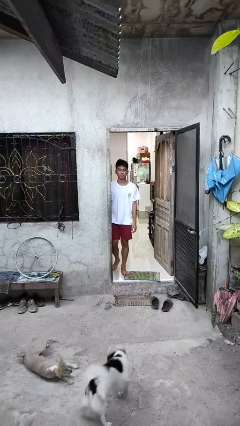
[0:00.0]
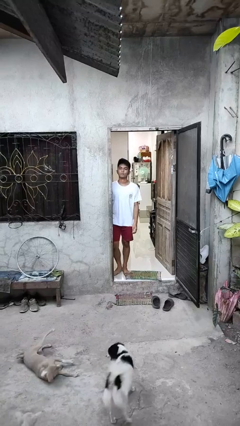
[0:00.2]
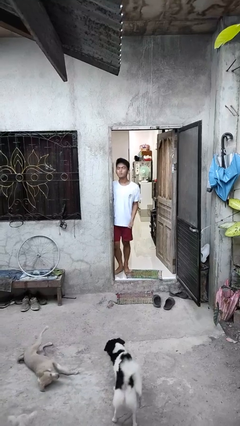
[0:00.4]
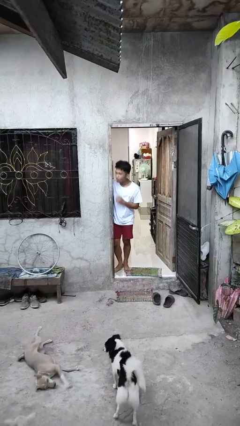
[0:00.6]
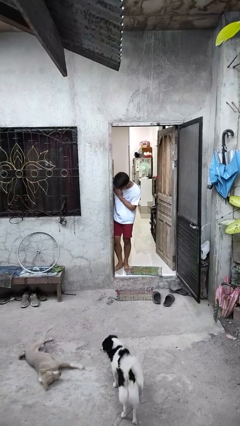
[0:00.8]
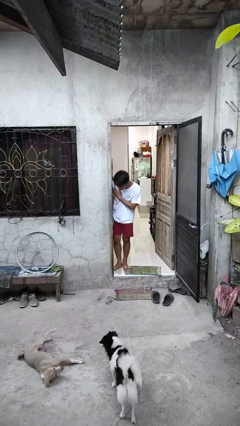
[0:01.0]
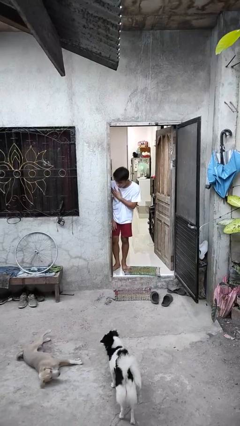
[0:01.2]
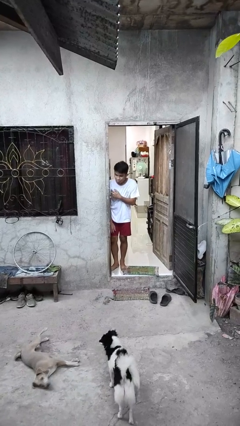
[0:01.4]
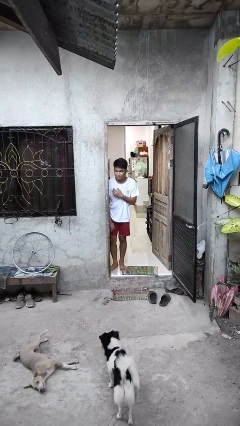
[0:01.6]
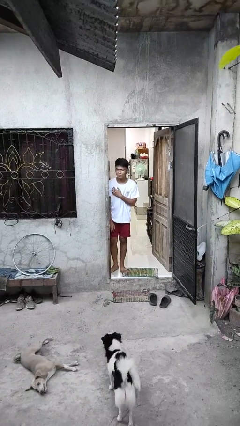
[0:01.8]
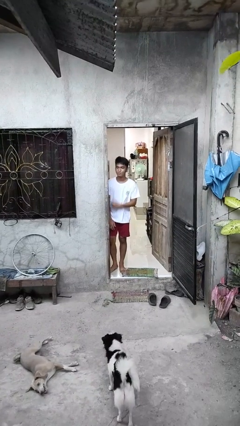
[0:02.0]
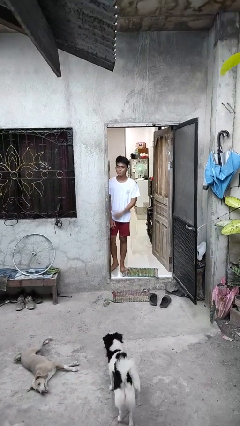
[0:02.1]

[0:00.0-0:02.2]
person bumps into wall

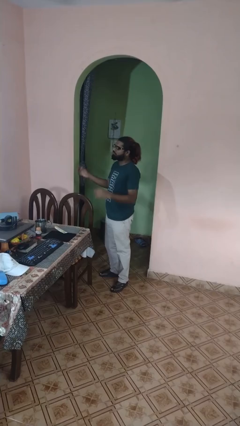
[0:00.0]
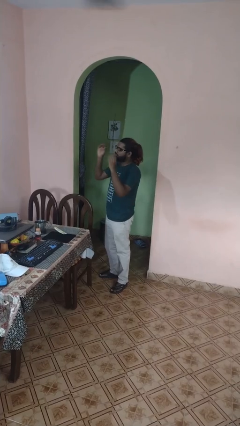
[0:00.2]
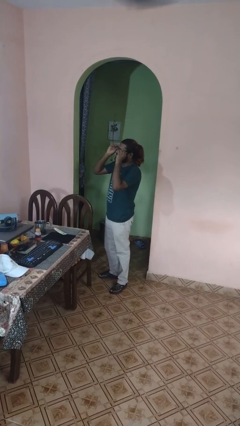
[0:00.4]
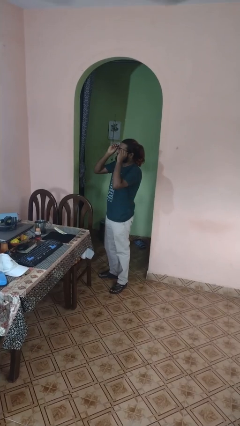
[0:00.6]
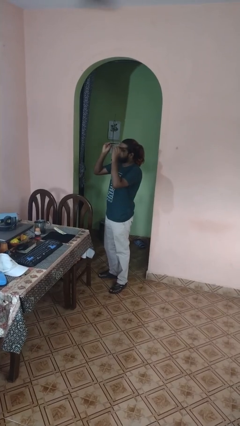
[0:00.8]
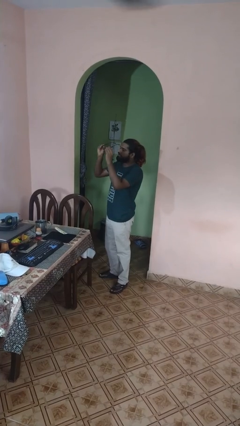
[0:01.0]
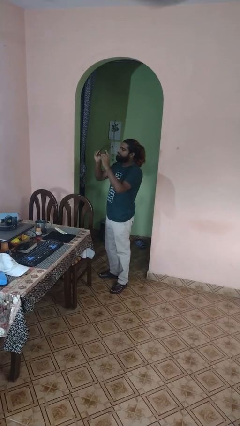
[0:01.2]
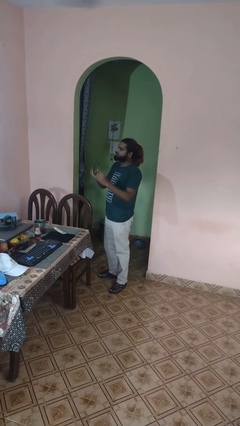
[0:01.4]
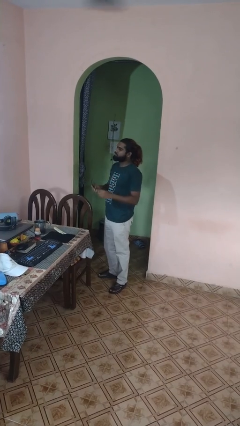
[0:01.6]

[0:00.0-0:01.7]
person takes off glasses

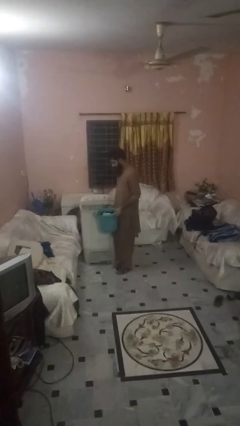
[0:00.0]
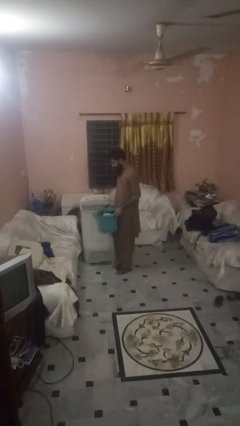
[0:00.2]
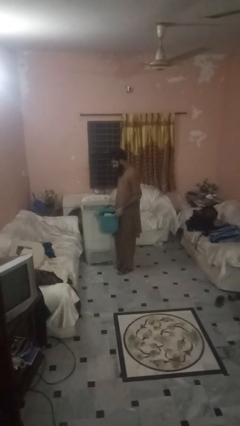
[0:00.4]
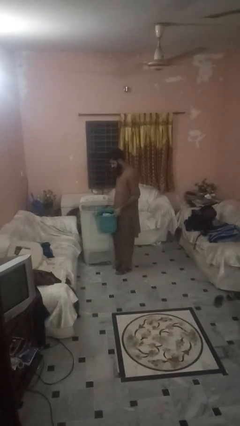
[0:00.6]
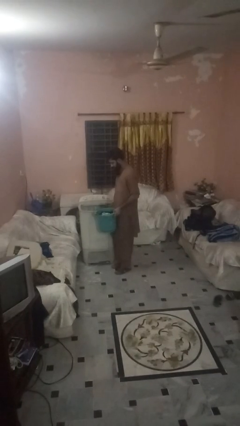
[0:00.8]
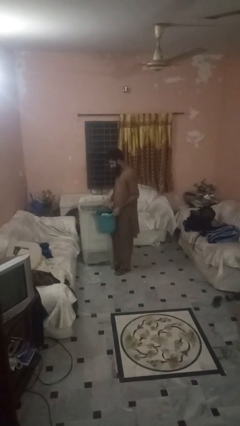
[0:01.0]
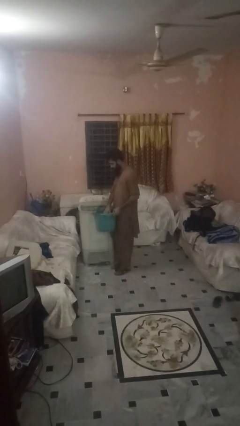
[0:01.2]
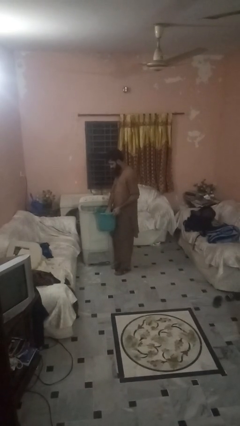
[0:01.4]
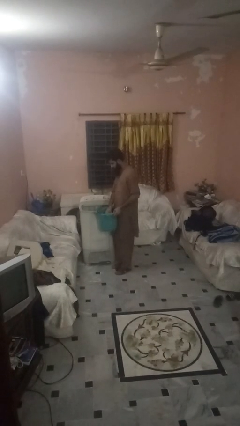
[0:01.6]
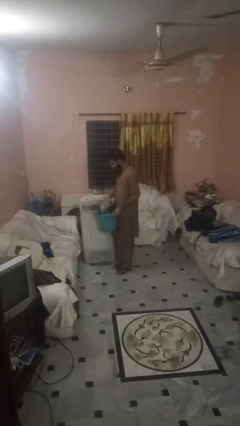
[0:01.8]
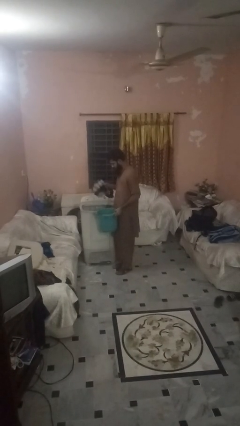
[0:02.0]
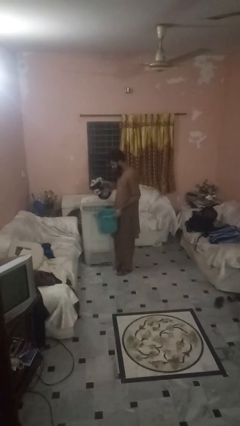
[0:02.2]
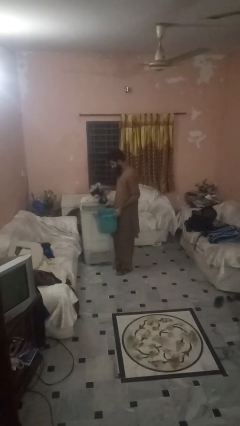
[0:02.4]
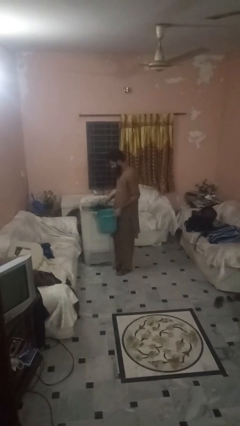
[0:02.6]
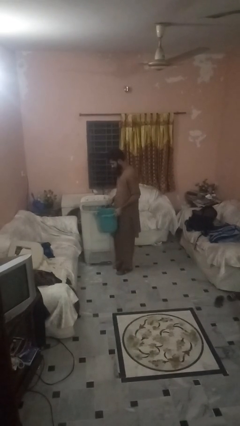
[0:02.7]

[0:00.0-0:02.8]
person loads clotheswasher

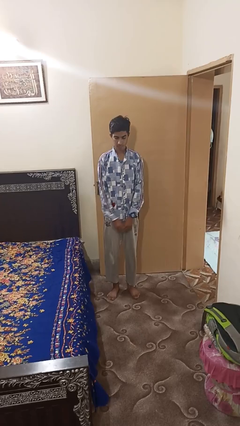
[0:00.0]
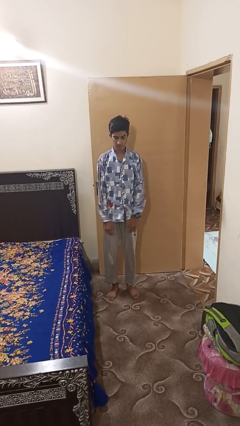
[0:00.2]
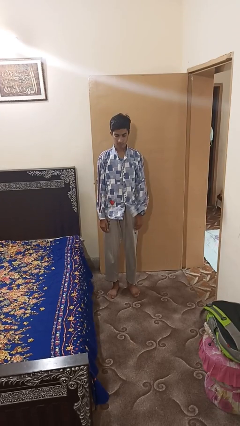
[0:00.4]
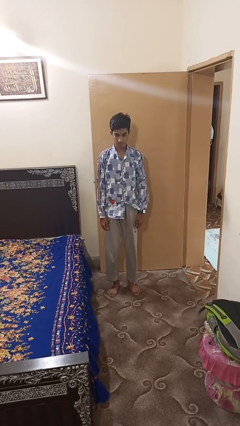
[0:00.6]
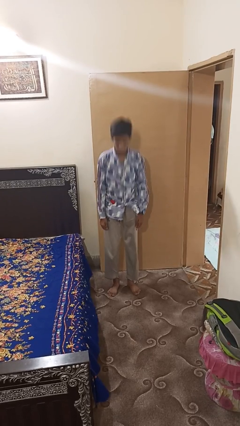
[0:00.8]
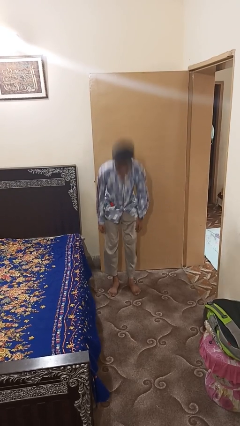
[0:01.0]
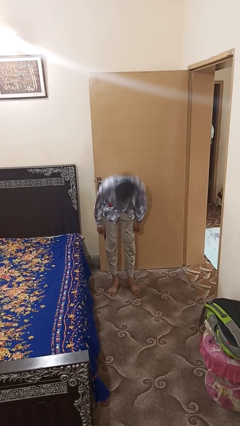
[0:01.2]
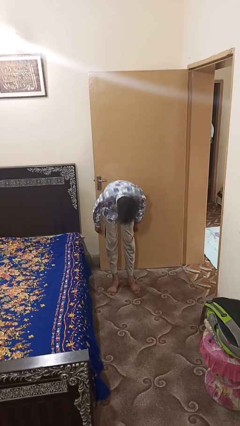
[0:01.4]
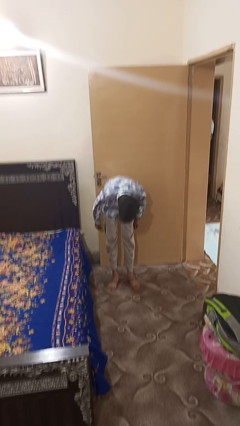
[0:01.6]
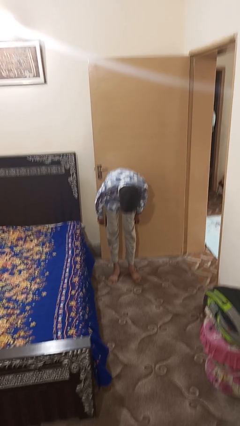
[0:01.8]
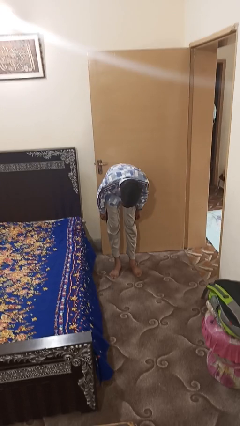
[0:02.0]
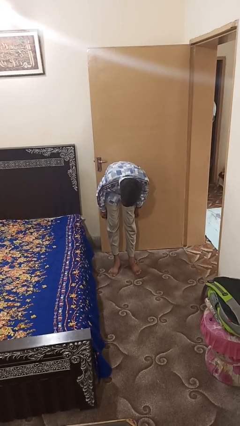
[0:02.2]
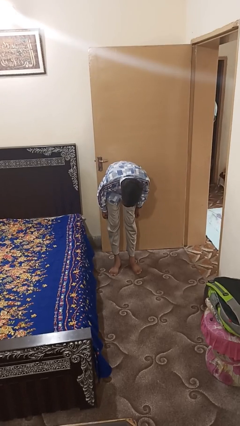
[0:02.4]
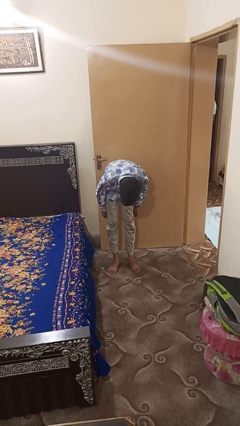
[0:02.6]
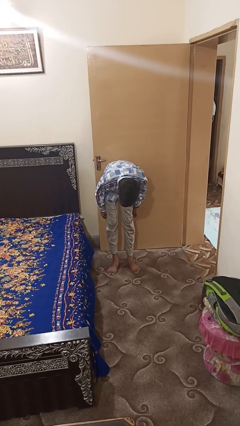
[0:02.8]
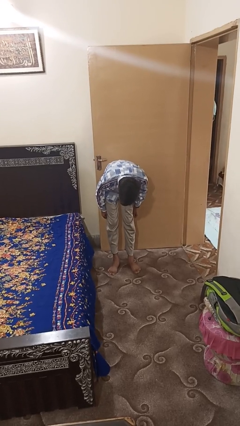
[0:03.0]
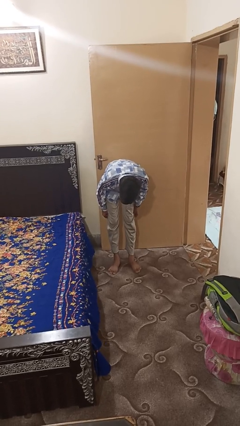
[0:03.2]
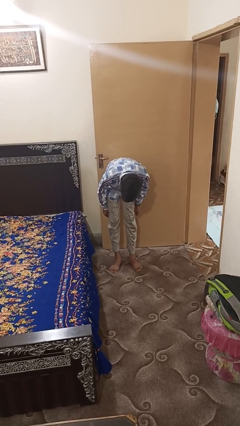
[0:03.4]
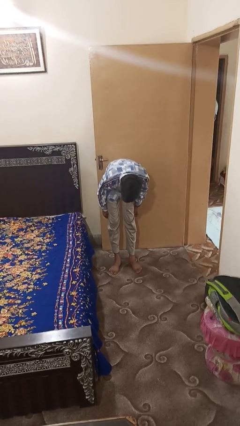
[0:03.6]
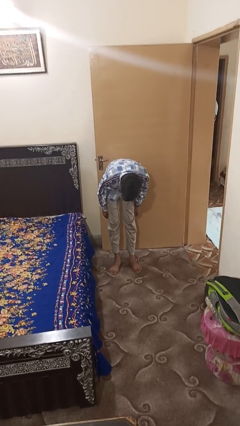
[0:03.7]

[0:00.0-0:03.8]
person bows

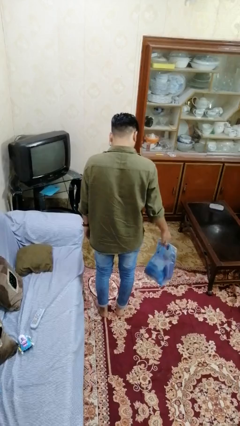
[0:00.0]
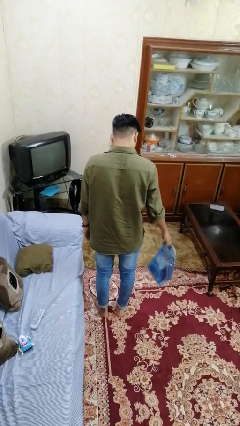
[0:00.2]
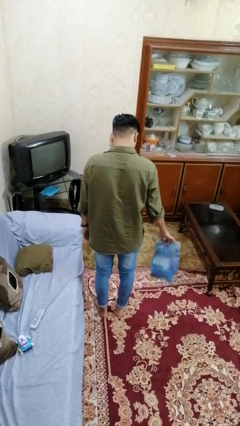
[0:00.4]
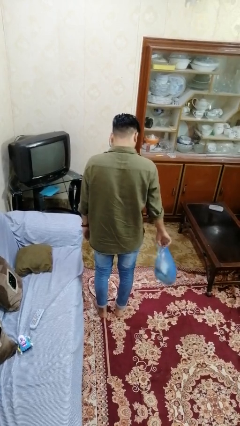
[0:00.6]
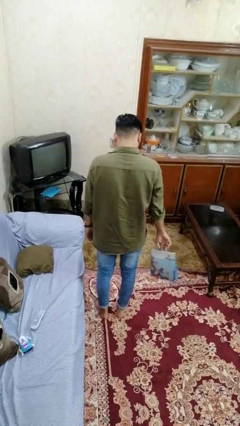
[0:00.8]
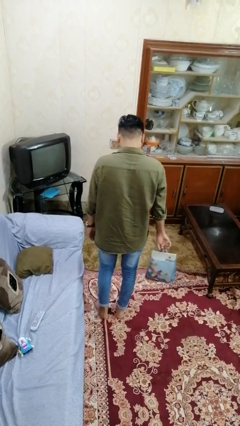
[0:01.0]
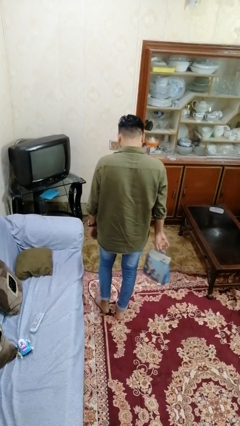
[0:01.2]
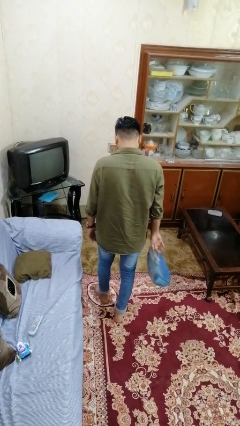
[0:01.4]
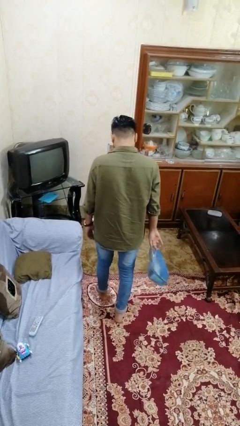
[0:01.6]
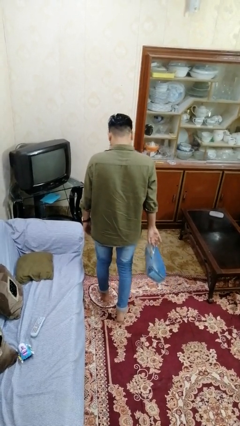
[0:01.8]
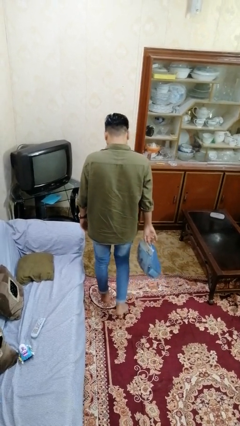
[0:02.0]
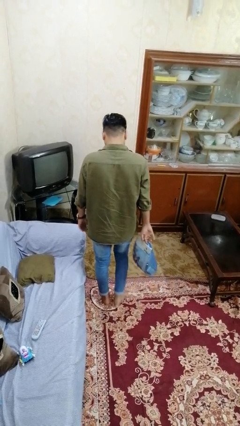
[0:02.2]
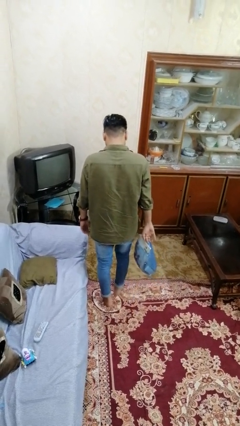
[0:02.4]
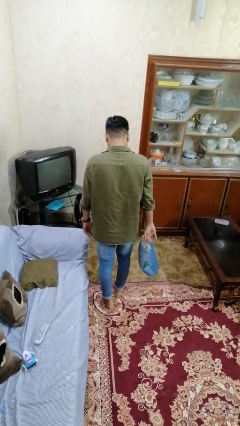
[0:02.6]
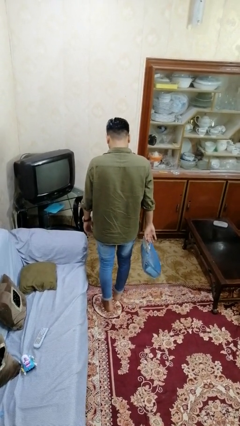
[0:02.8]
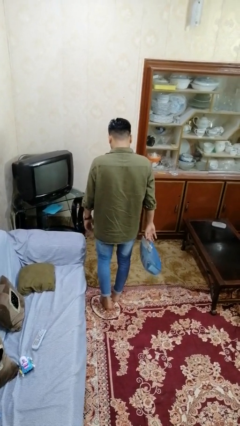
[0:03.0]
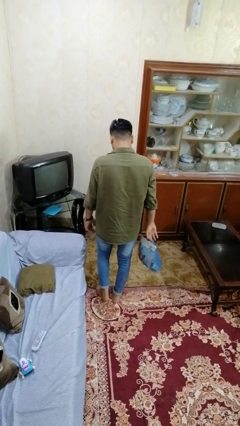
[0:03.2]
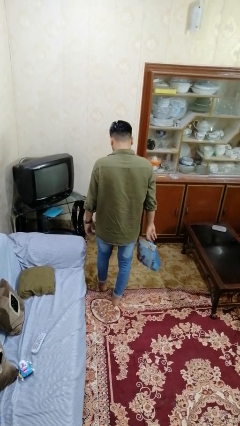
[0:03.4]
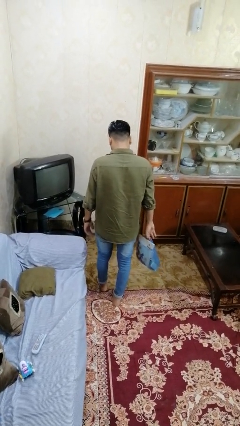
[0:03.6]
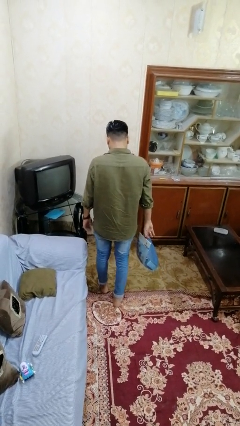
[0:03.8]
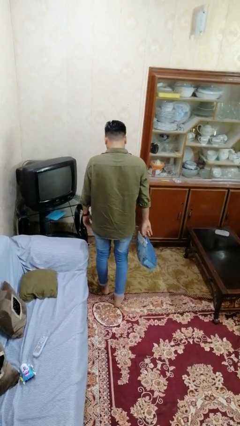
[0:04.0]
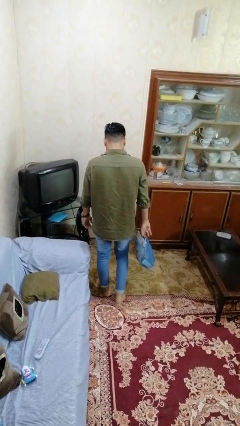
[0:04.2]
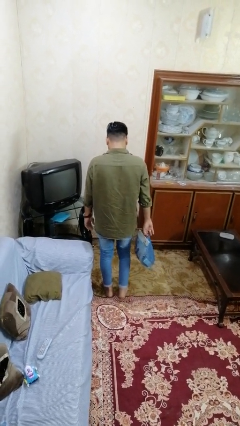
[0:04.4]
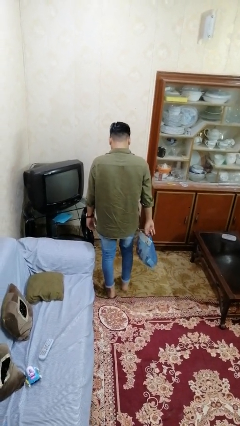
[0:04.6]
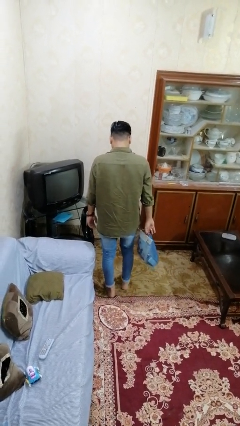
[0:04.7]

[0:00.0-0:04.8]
person carries groceries

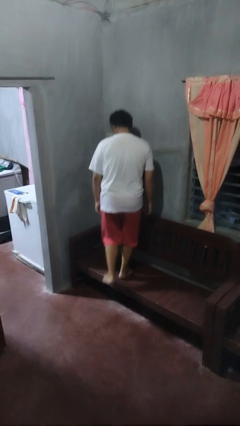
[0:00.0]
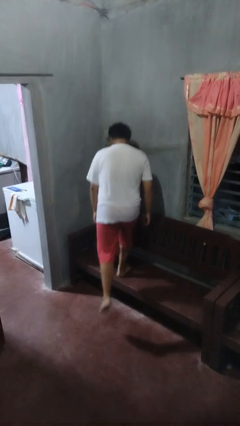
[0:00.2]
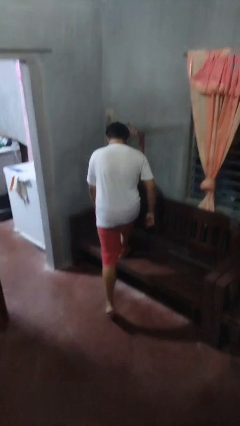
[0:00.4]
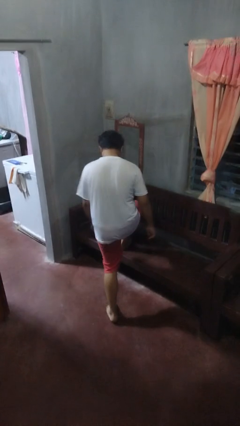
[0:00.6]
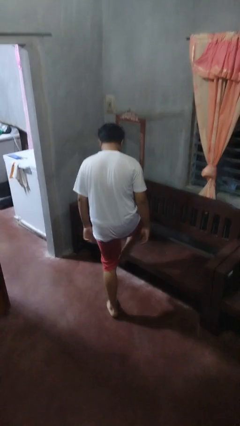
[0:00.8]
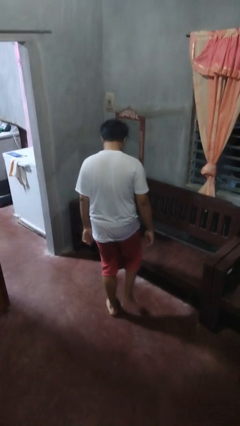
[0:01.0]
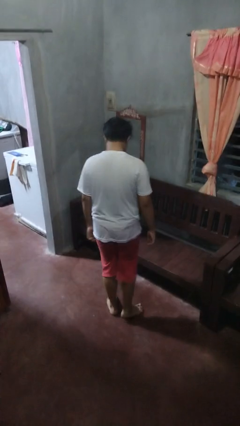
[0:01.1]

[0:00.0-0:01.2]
person climbs off couch

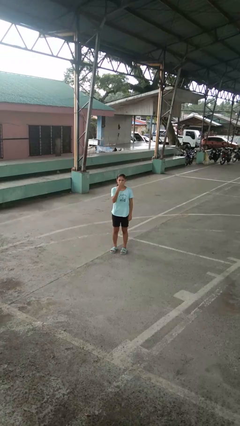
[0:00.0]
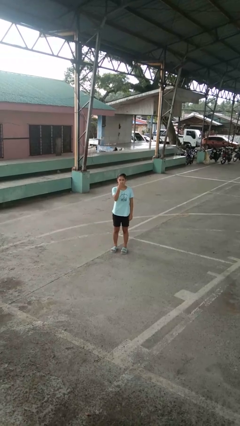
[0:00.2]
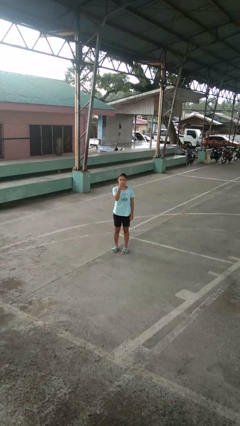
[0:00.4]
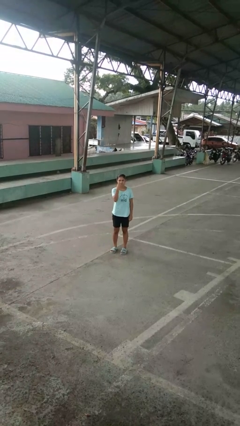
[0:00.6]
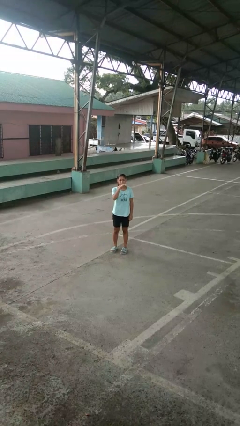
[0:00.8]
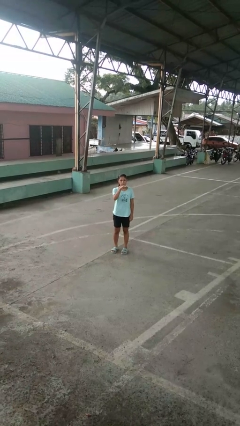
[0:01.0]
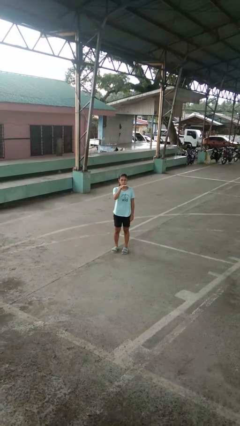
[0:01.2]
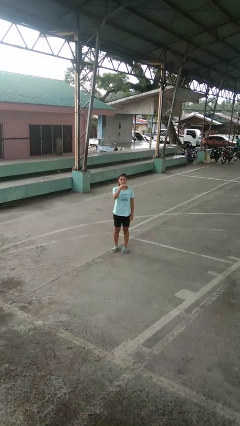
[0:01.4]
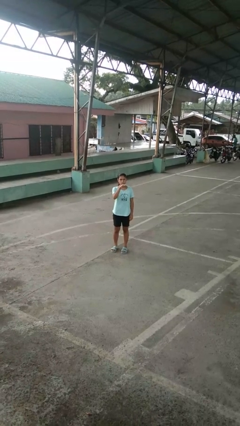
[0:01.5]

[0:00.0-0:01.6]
person gestures watch closely
